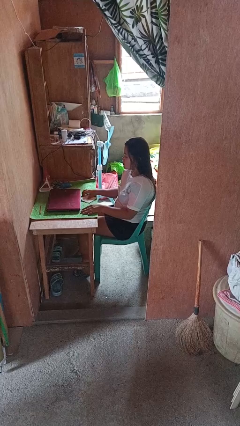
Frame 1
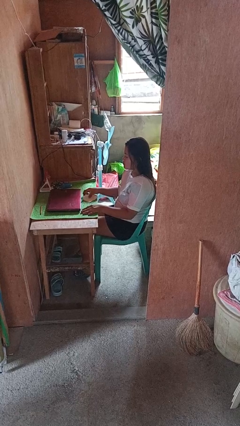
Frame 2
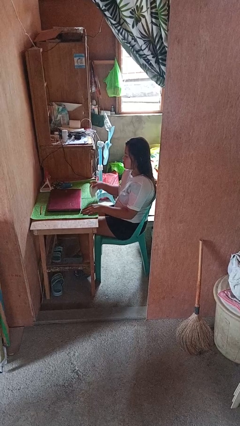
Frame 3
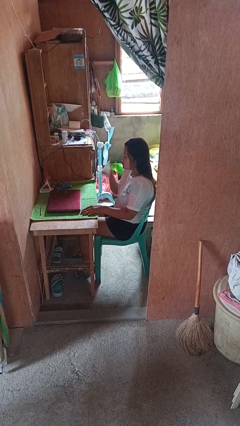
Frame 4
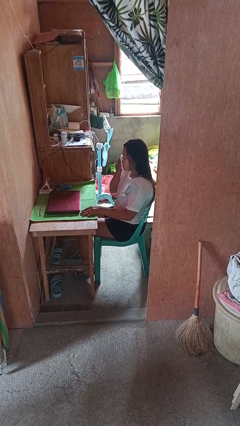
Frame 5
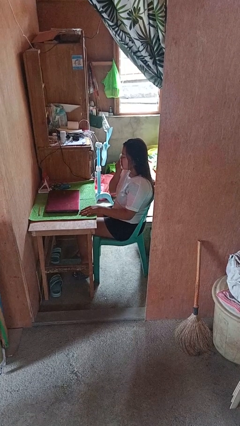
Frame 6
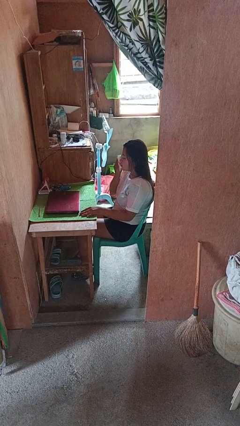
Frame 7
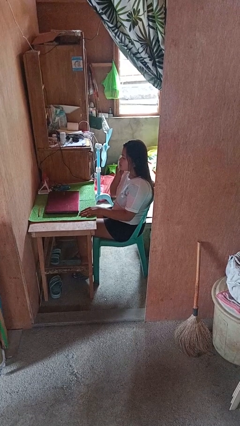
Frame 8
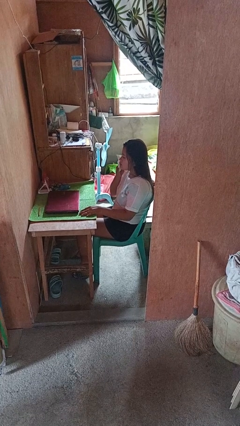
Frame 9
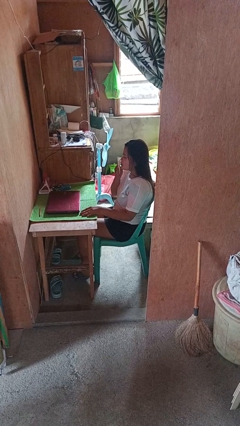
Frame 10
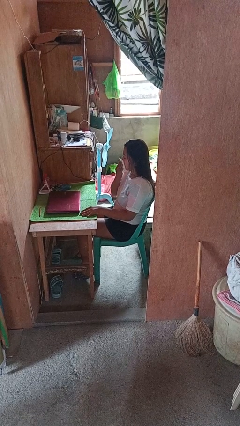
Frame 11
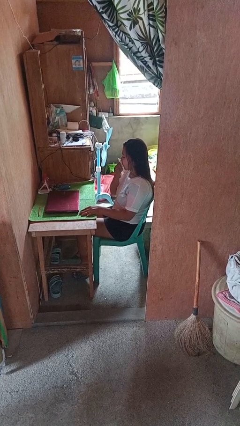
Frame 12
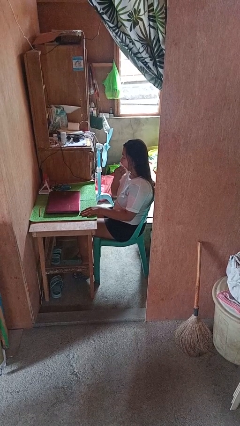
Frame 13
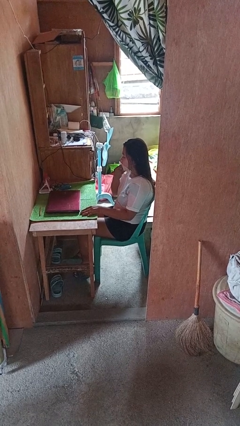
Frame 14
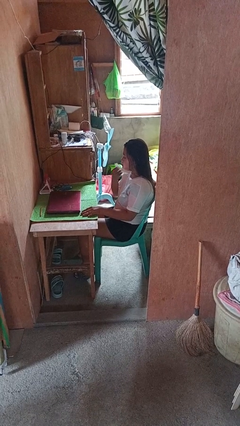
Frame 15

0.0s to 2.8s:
person wipes mouth with napkin

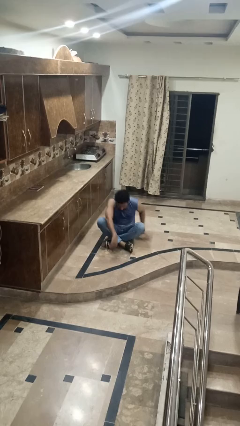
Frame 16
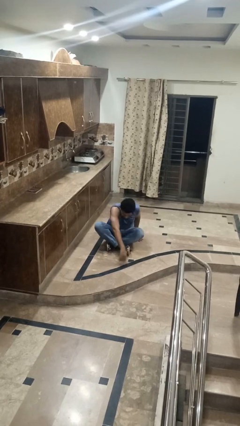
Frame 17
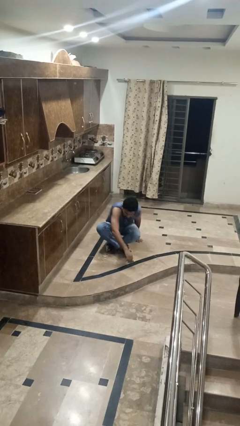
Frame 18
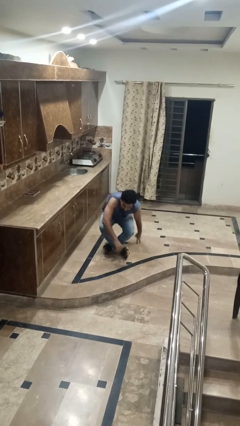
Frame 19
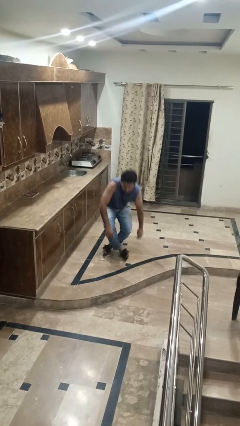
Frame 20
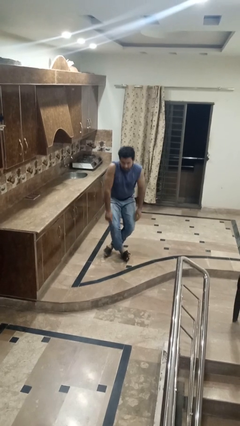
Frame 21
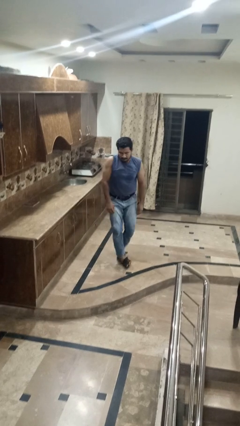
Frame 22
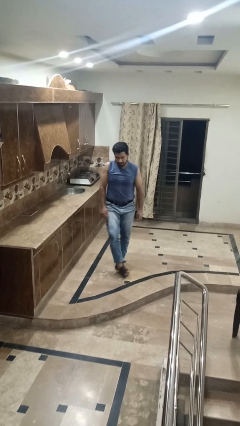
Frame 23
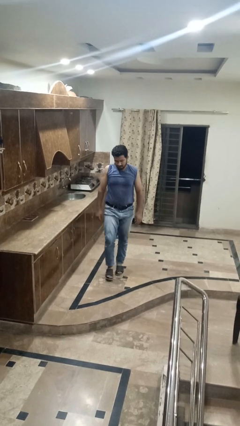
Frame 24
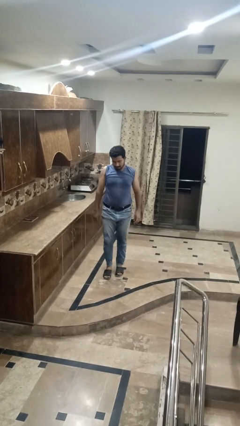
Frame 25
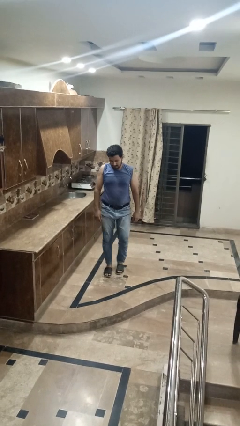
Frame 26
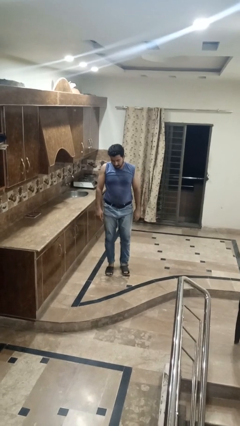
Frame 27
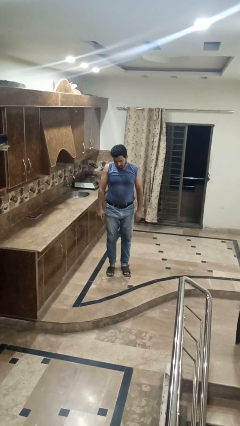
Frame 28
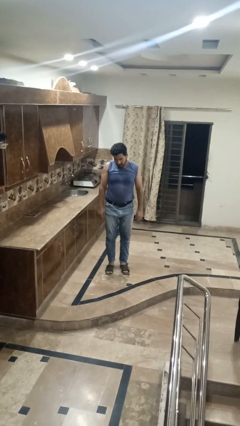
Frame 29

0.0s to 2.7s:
person stands up from floor

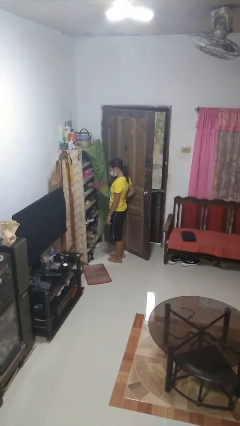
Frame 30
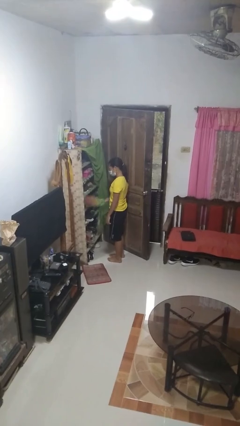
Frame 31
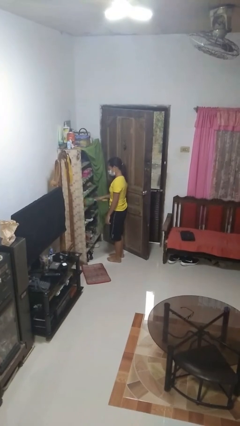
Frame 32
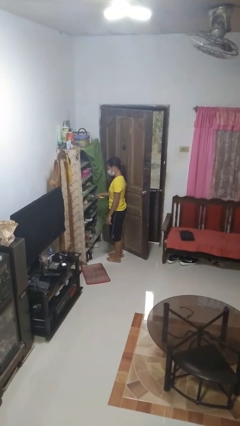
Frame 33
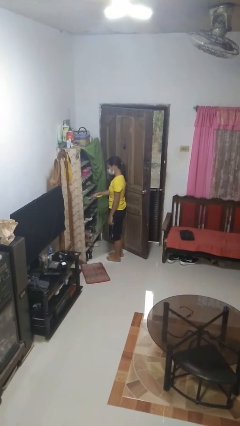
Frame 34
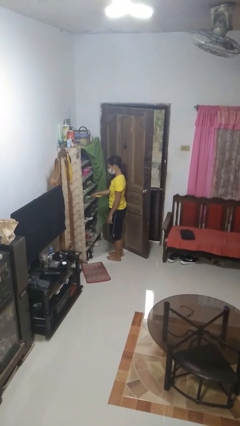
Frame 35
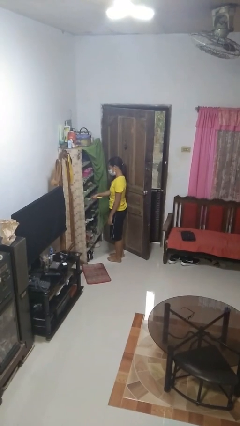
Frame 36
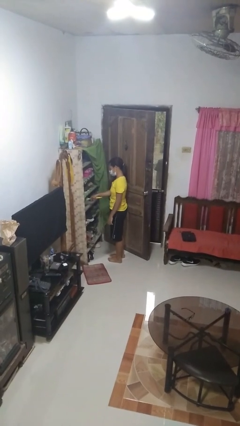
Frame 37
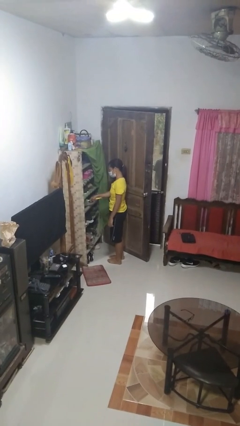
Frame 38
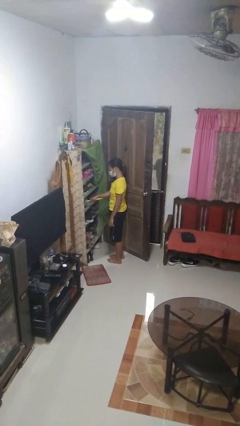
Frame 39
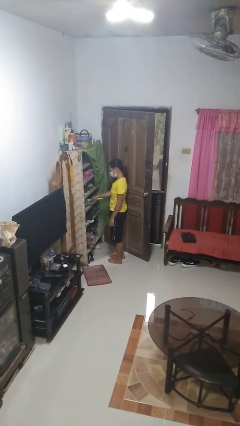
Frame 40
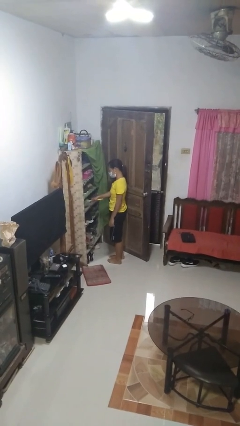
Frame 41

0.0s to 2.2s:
person dusts furniture

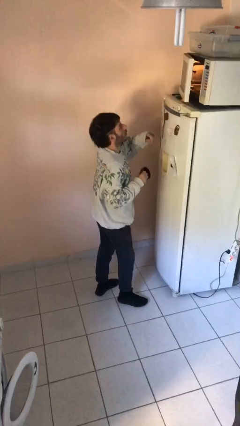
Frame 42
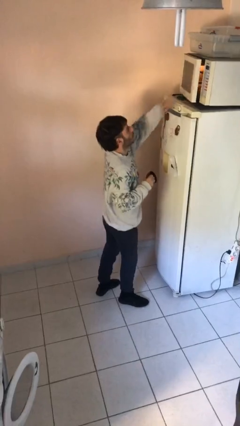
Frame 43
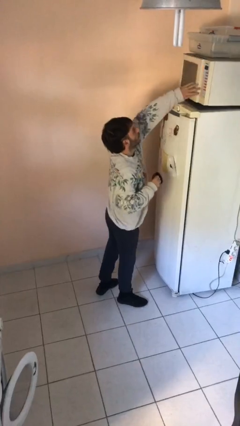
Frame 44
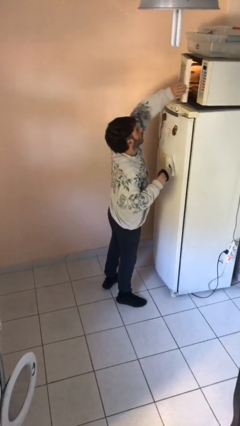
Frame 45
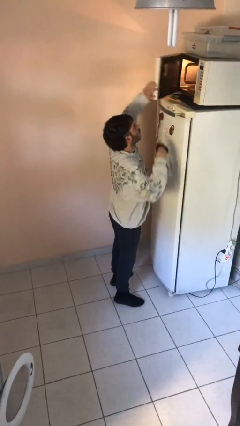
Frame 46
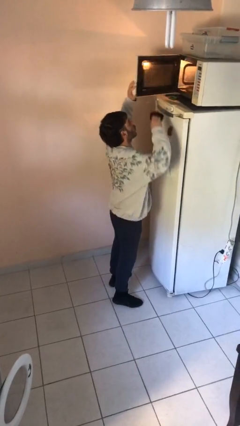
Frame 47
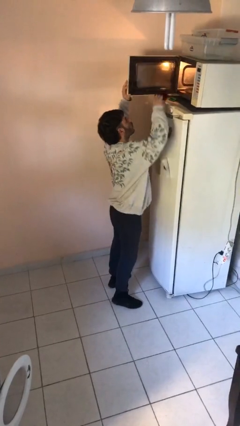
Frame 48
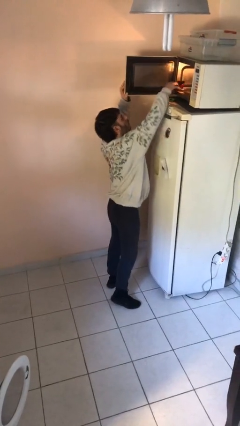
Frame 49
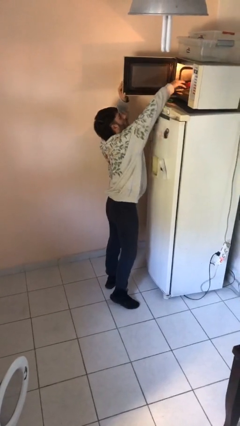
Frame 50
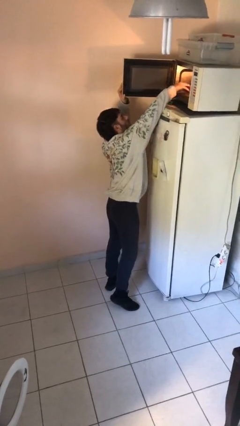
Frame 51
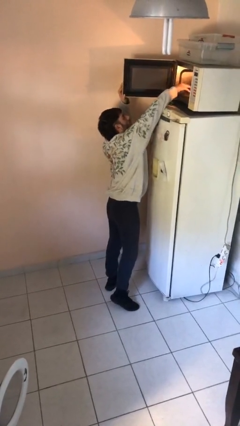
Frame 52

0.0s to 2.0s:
person puts object into microwave

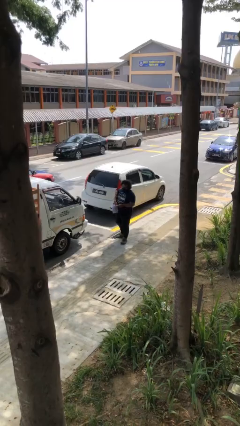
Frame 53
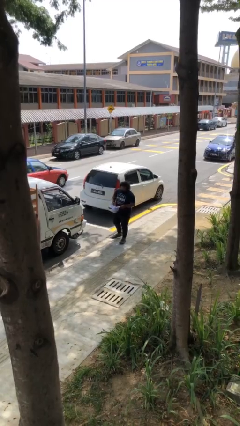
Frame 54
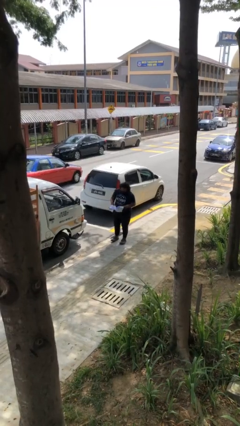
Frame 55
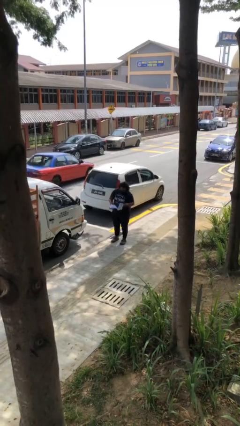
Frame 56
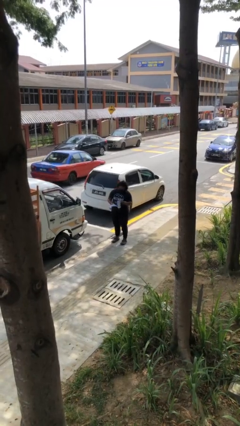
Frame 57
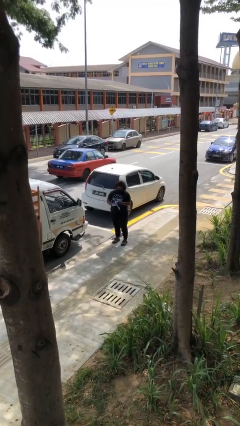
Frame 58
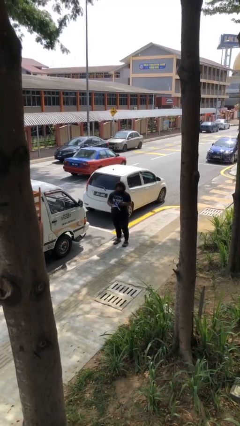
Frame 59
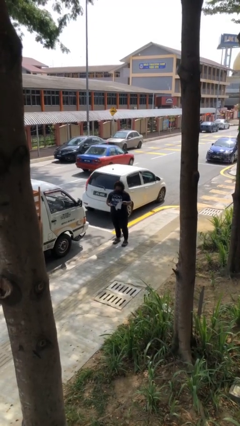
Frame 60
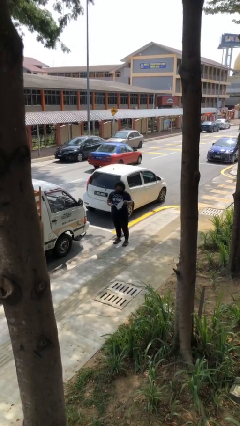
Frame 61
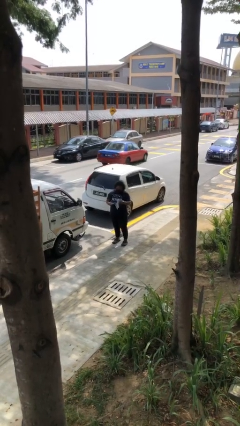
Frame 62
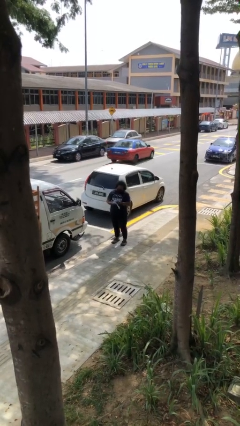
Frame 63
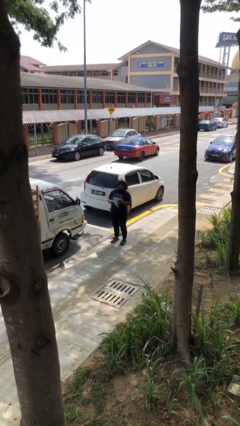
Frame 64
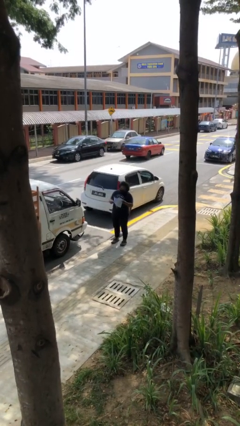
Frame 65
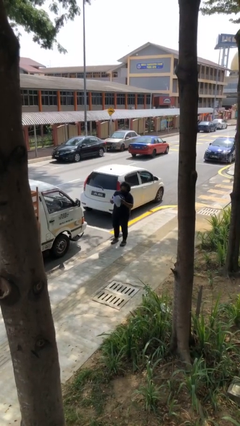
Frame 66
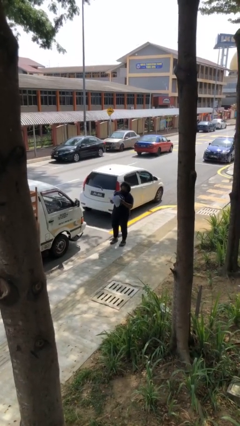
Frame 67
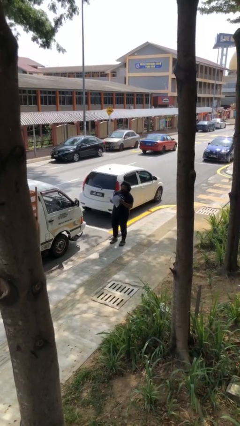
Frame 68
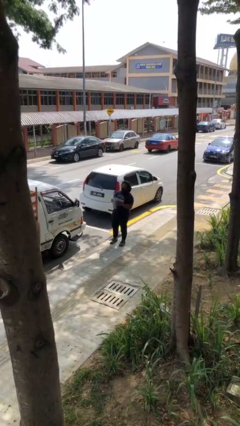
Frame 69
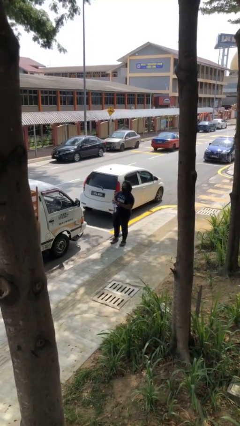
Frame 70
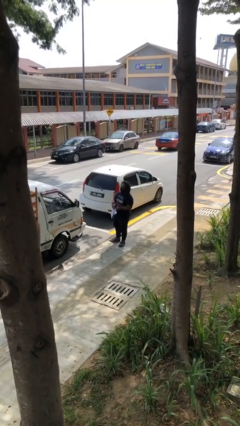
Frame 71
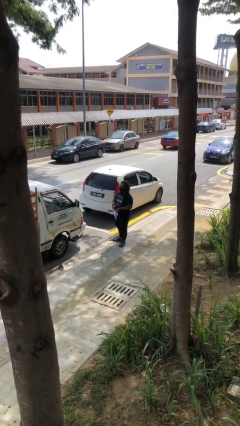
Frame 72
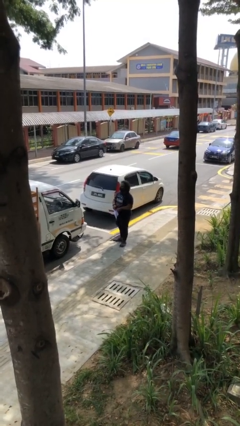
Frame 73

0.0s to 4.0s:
person reads document

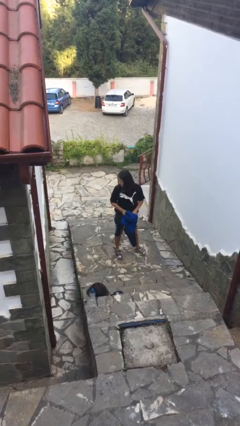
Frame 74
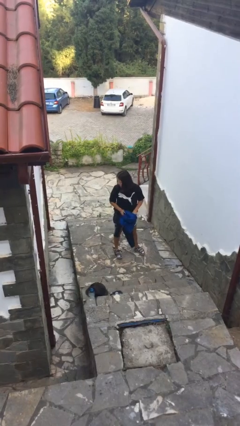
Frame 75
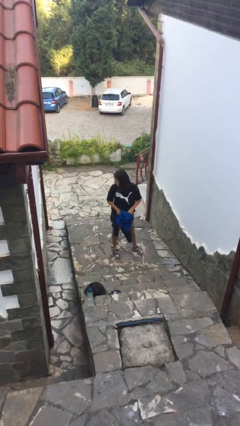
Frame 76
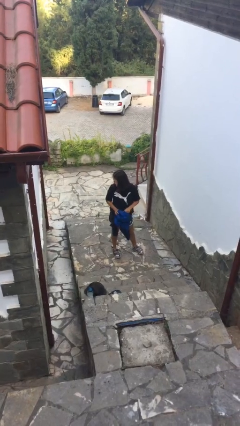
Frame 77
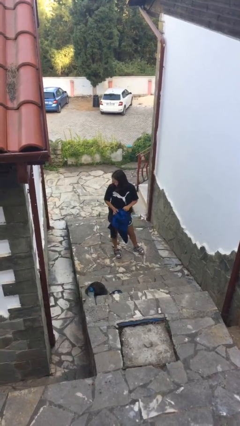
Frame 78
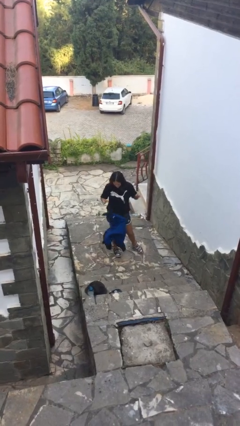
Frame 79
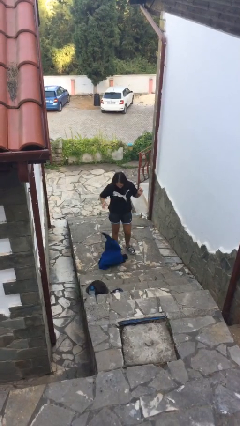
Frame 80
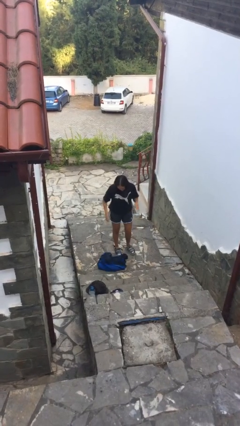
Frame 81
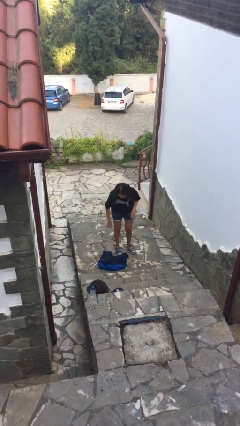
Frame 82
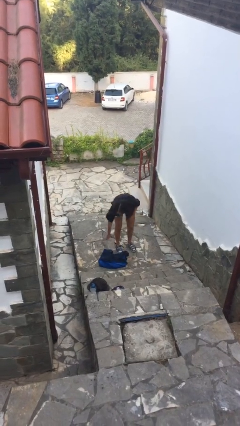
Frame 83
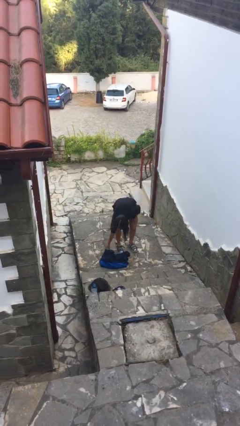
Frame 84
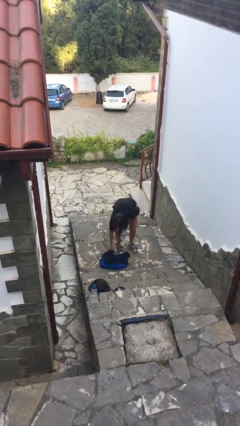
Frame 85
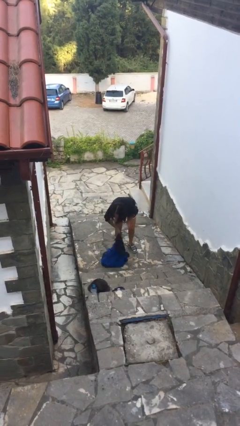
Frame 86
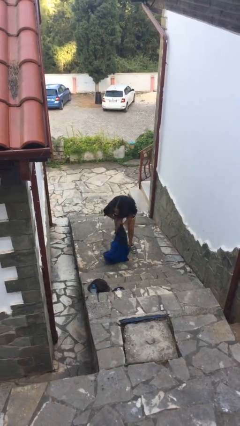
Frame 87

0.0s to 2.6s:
person drops object

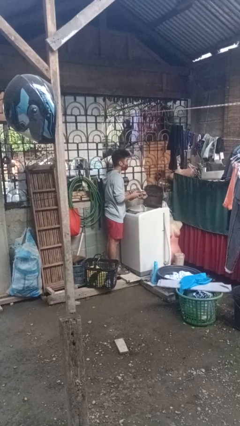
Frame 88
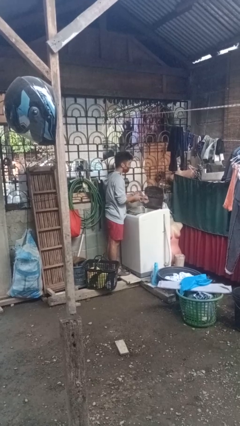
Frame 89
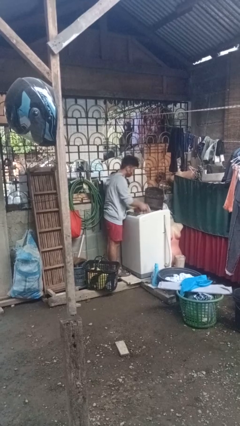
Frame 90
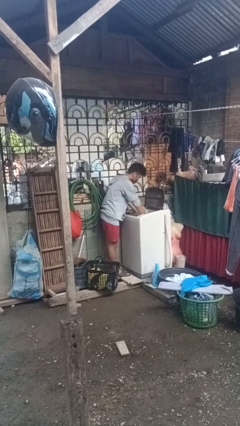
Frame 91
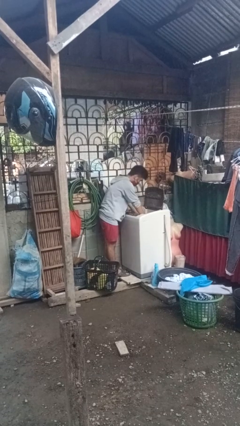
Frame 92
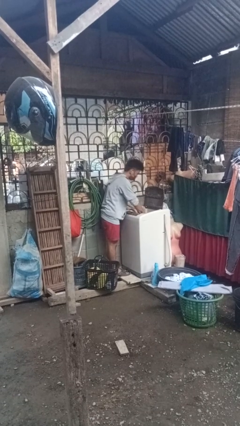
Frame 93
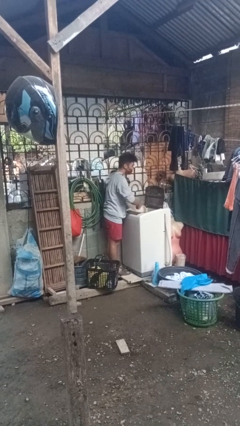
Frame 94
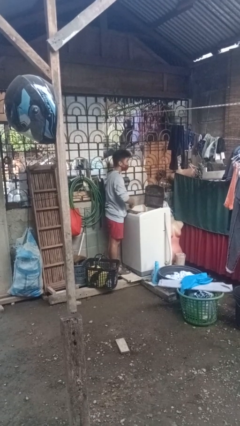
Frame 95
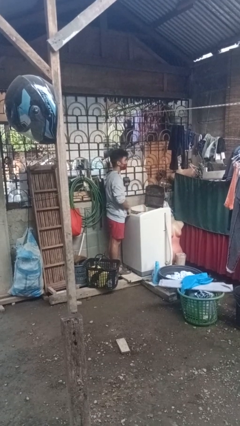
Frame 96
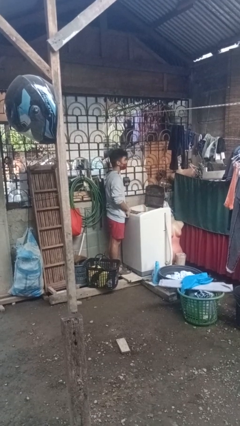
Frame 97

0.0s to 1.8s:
person loads dryer
